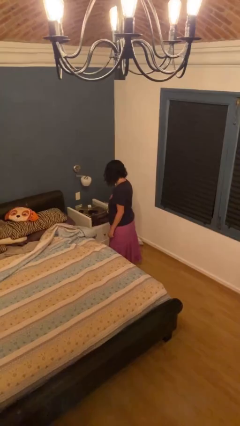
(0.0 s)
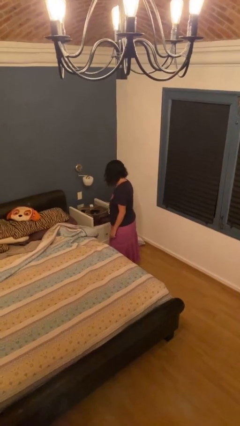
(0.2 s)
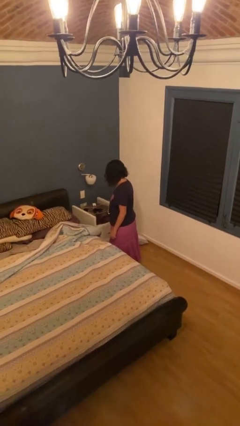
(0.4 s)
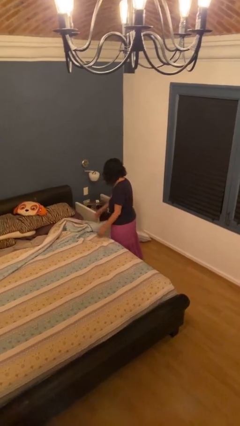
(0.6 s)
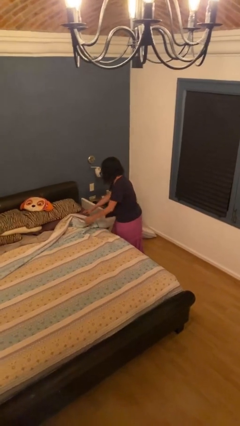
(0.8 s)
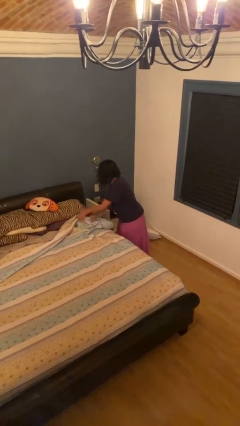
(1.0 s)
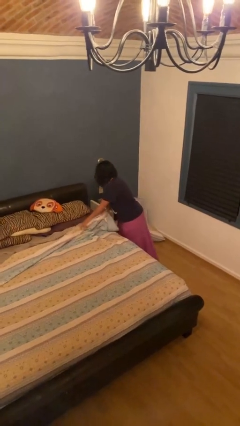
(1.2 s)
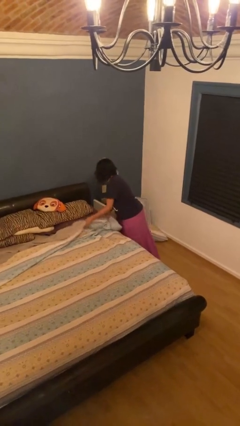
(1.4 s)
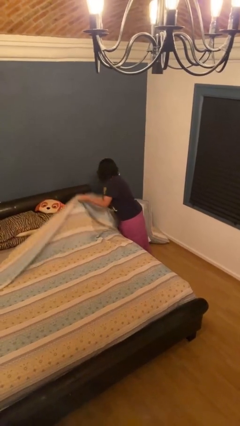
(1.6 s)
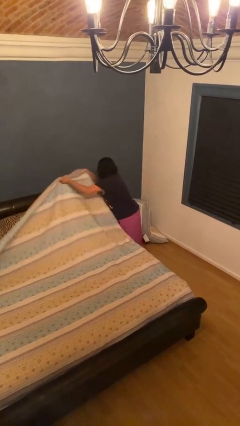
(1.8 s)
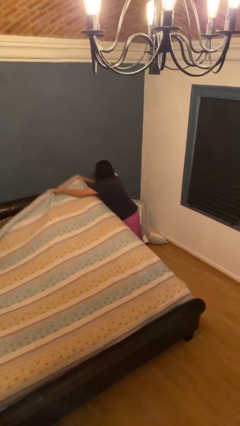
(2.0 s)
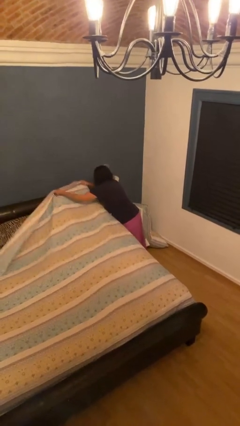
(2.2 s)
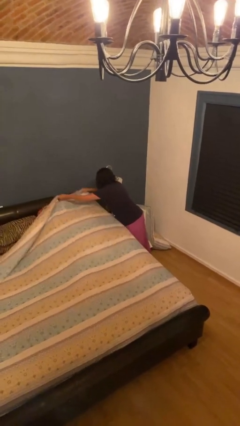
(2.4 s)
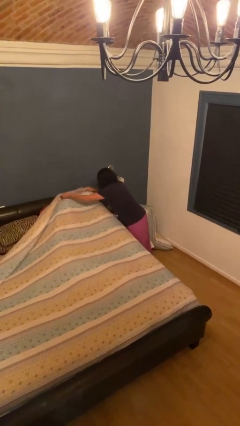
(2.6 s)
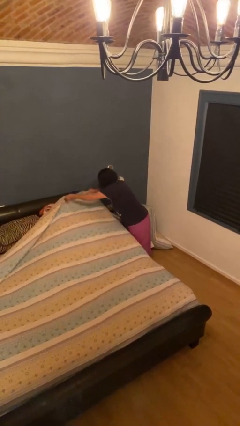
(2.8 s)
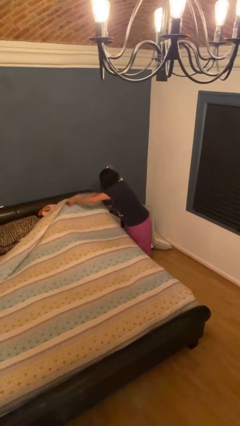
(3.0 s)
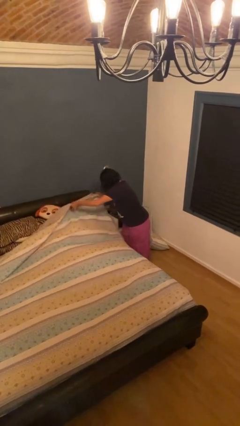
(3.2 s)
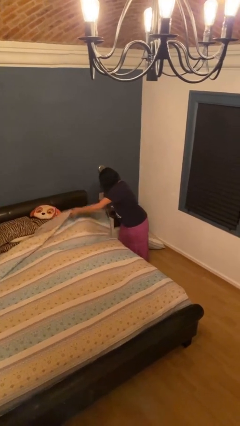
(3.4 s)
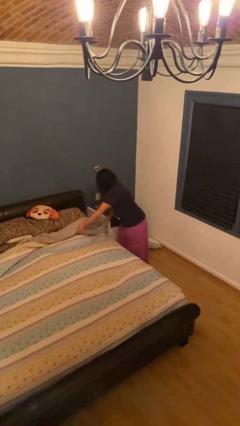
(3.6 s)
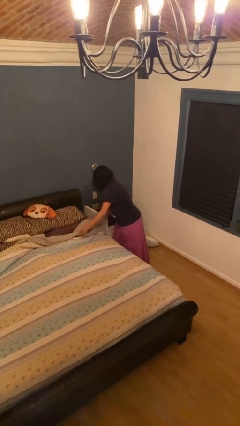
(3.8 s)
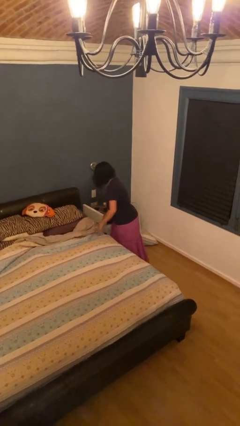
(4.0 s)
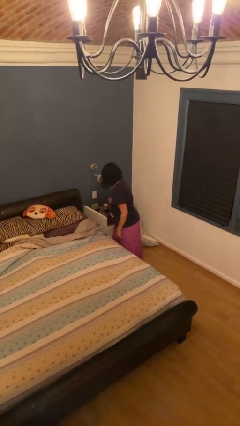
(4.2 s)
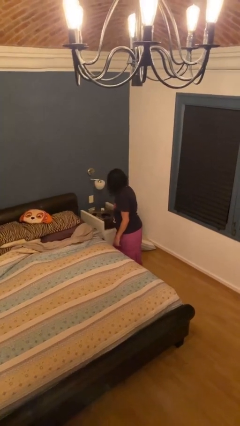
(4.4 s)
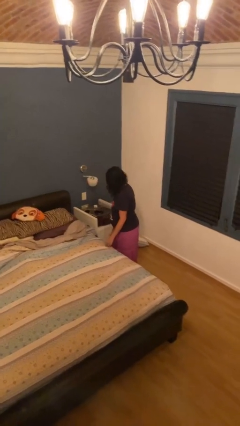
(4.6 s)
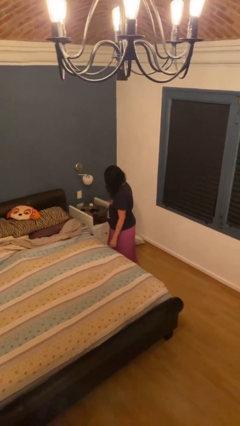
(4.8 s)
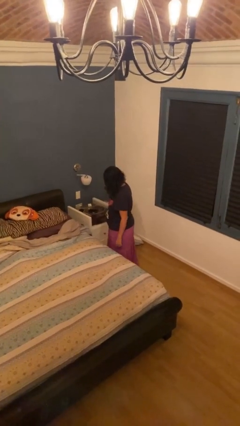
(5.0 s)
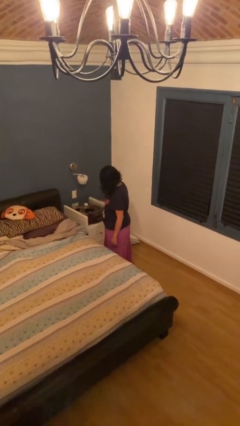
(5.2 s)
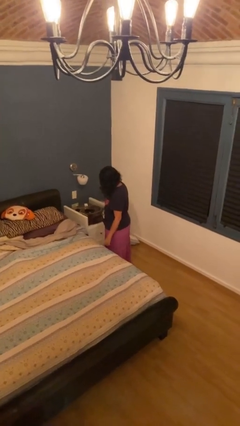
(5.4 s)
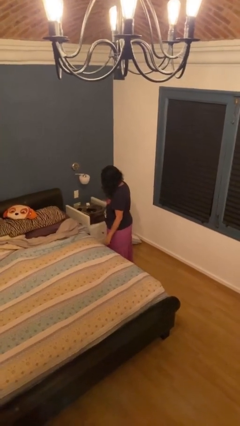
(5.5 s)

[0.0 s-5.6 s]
person makes bed

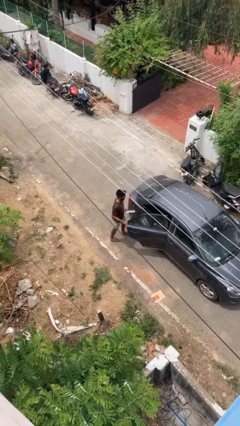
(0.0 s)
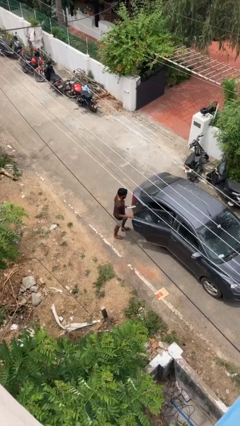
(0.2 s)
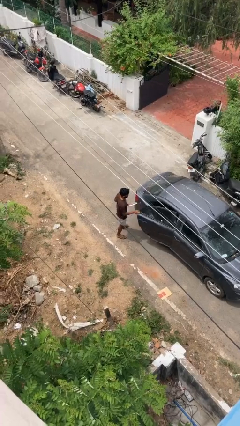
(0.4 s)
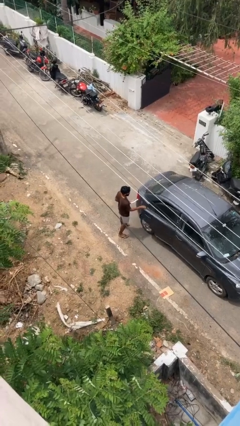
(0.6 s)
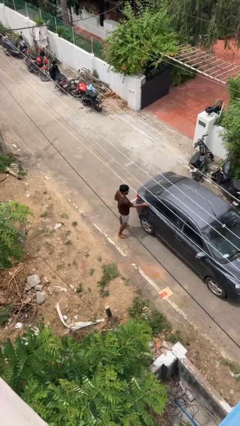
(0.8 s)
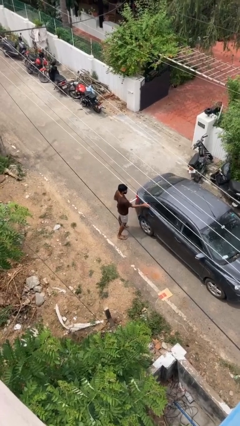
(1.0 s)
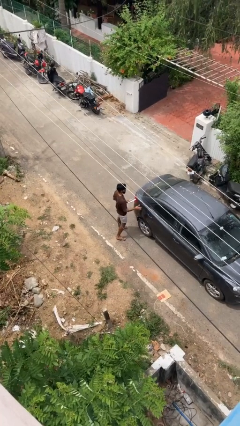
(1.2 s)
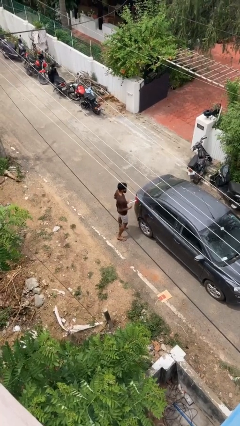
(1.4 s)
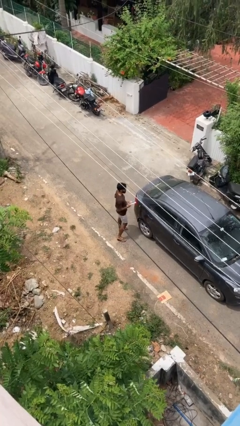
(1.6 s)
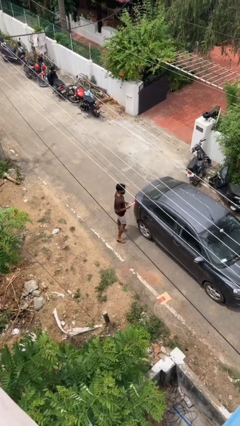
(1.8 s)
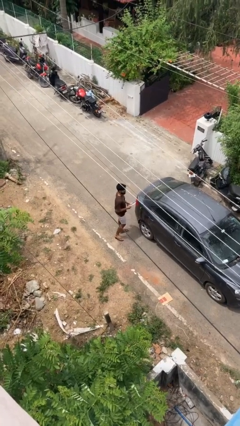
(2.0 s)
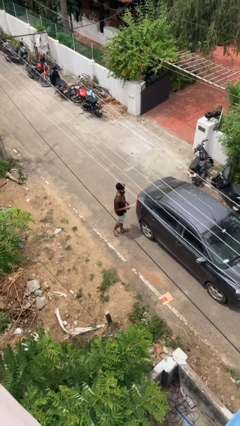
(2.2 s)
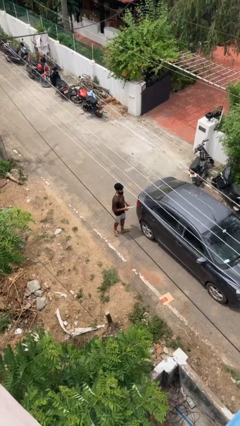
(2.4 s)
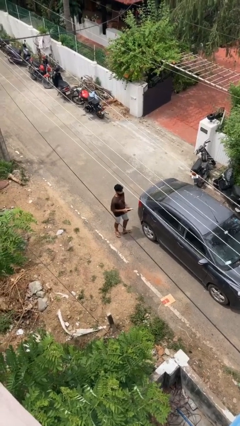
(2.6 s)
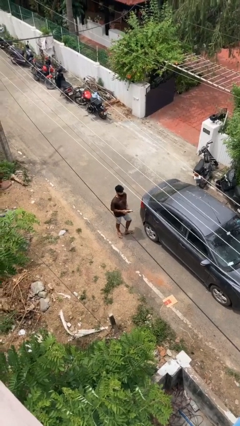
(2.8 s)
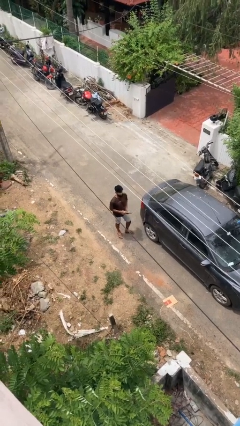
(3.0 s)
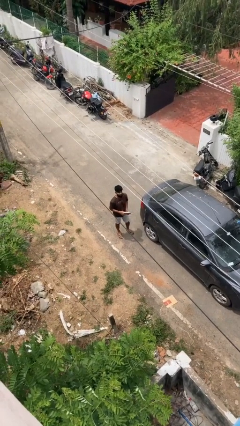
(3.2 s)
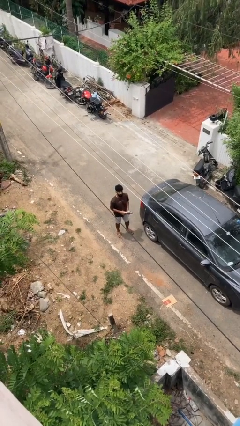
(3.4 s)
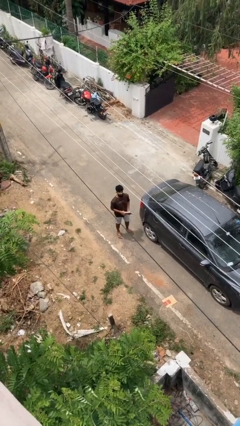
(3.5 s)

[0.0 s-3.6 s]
person closes car door

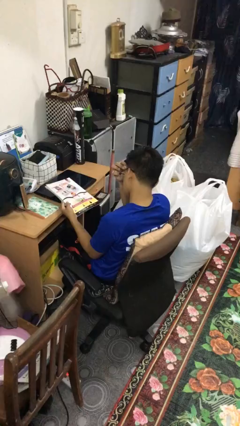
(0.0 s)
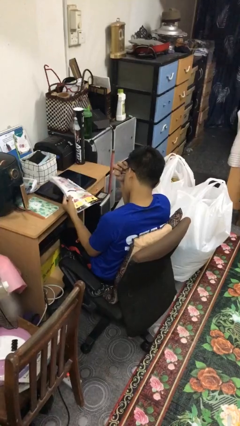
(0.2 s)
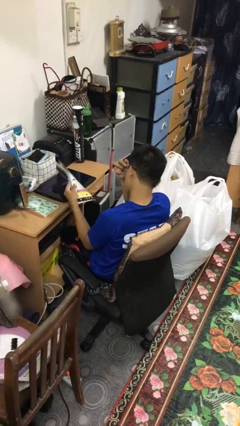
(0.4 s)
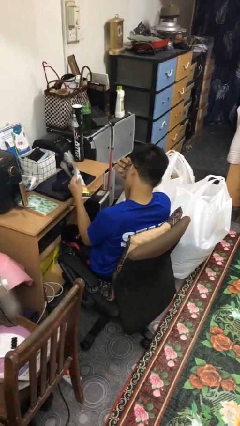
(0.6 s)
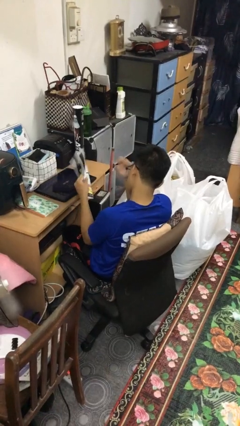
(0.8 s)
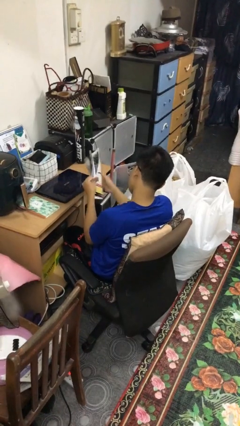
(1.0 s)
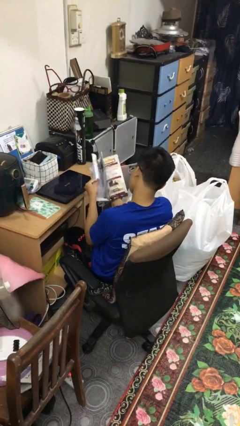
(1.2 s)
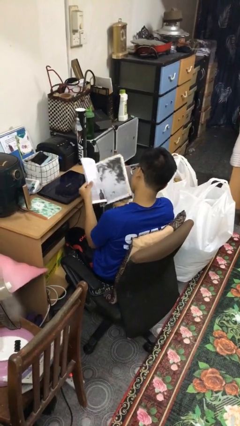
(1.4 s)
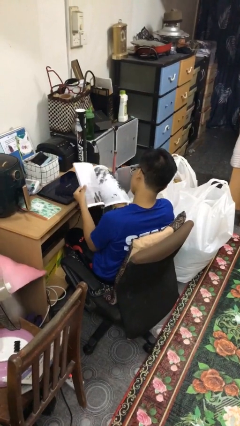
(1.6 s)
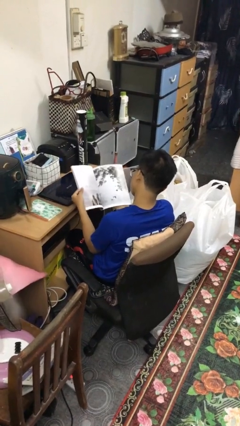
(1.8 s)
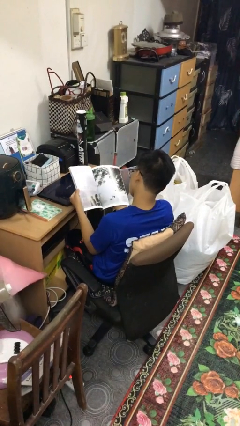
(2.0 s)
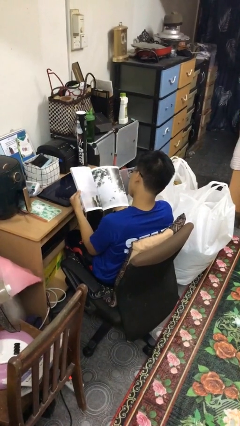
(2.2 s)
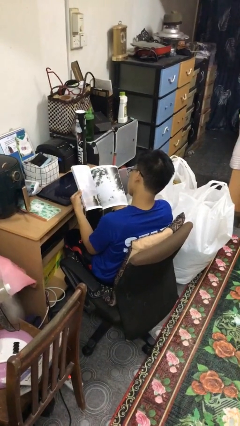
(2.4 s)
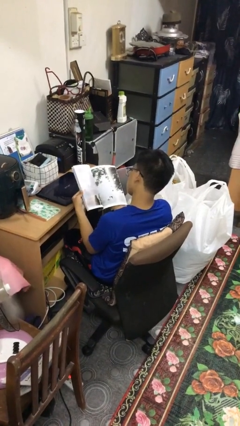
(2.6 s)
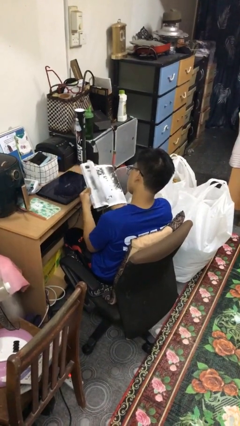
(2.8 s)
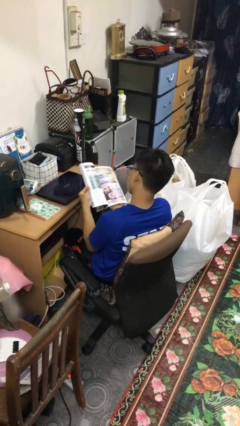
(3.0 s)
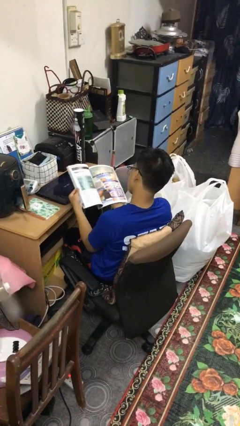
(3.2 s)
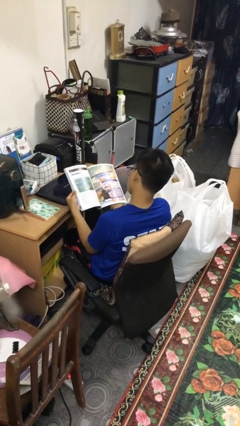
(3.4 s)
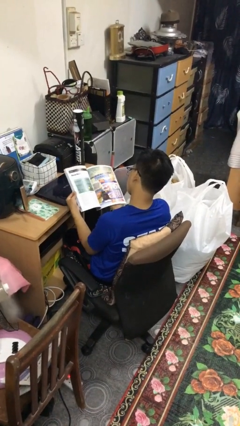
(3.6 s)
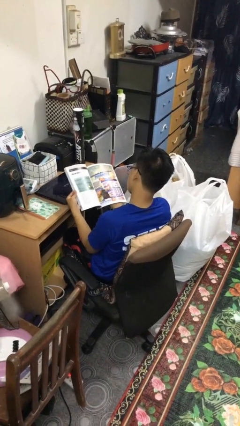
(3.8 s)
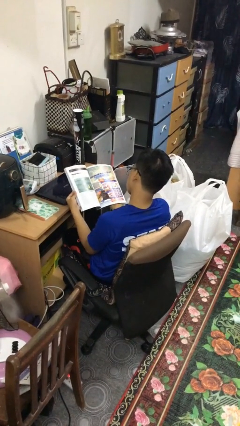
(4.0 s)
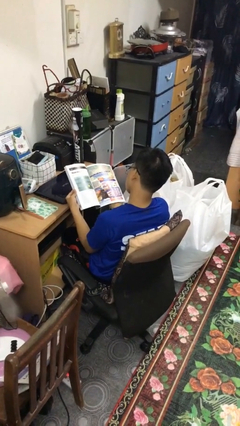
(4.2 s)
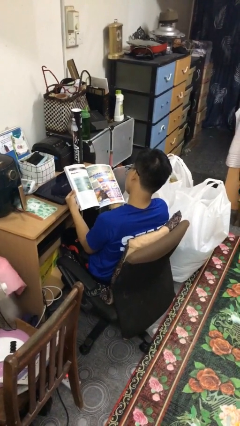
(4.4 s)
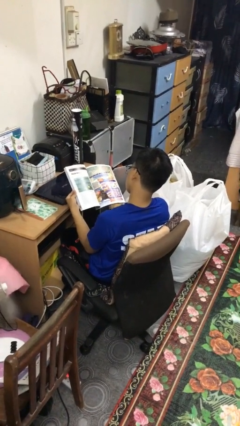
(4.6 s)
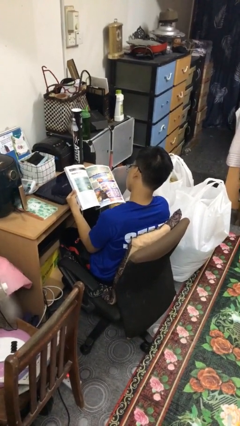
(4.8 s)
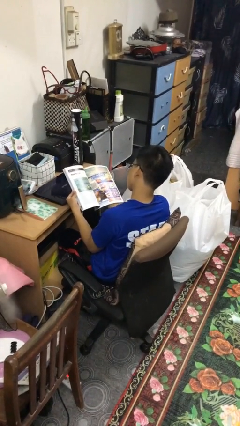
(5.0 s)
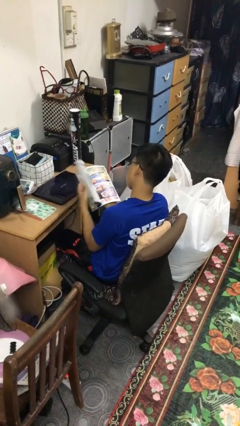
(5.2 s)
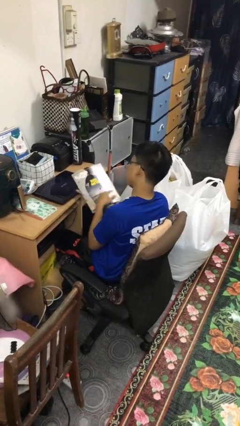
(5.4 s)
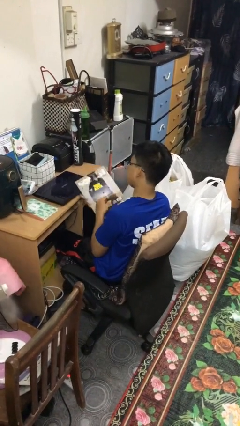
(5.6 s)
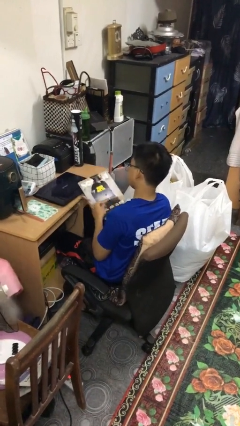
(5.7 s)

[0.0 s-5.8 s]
person reads magazine

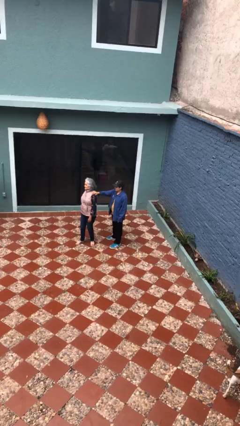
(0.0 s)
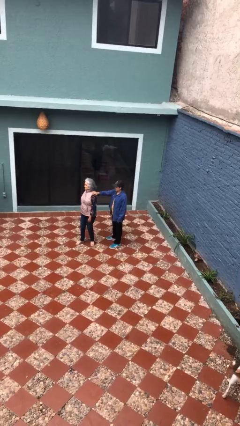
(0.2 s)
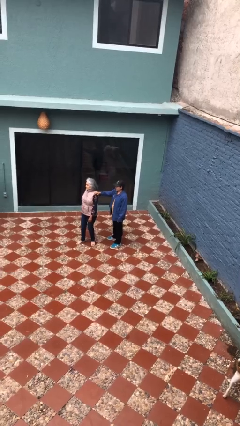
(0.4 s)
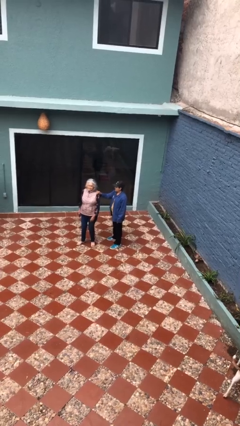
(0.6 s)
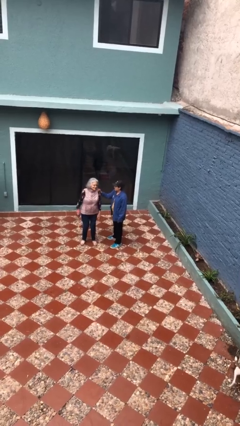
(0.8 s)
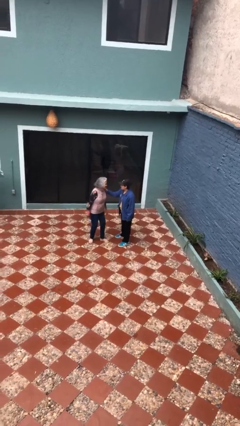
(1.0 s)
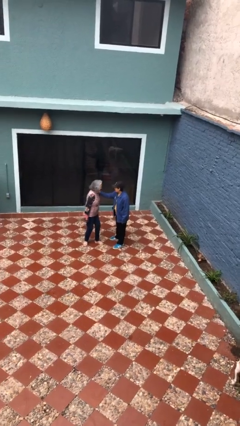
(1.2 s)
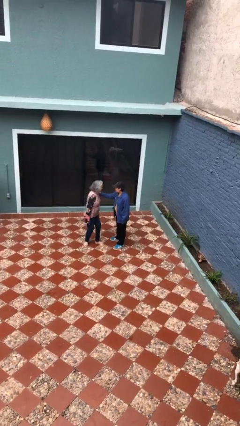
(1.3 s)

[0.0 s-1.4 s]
person grabs person by shoulder

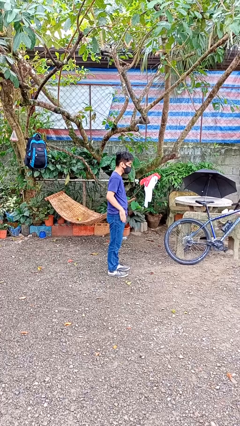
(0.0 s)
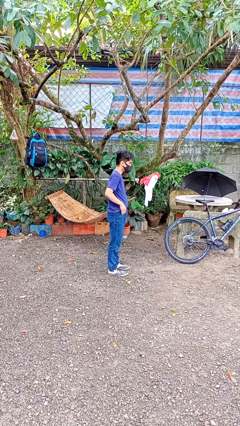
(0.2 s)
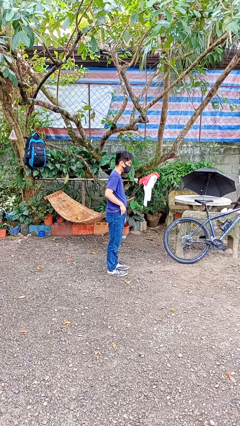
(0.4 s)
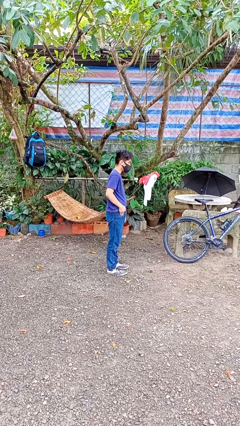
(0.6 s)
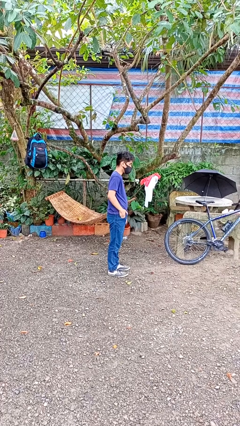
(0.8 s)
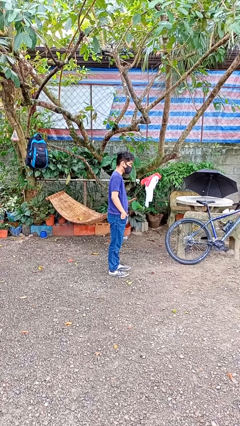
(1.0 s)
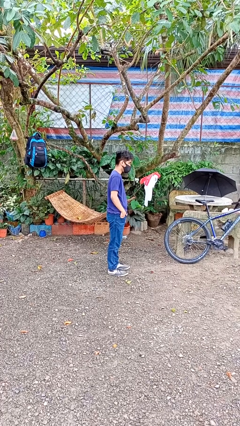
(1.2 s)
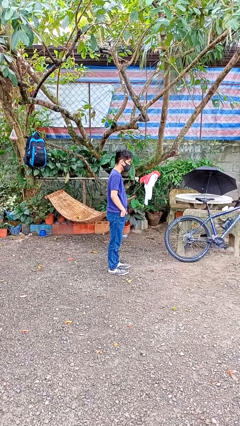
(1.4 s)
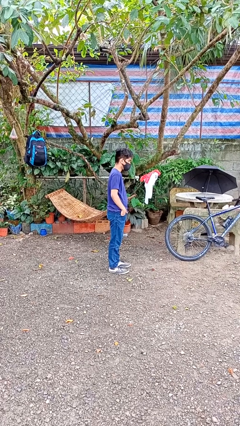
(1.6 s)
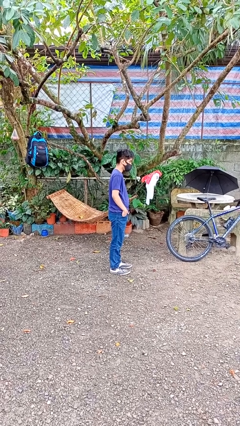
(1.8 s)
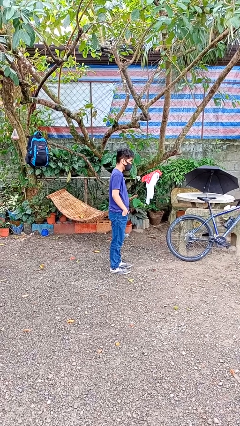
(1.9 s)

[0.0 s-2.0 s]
person puts hands in back pockets
